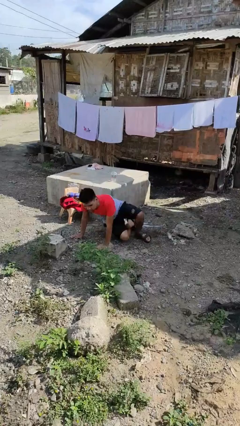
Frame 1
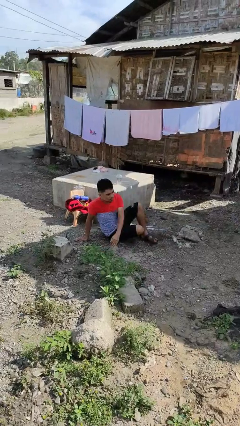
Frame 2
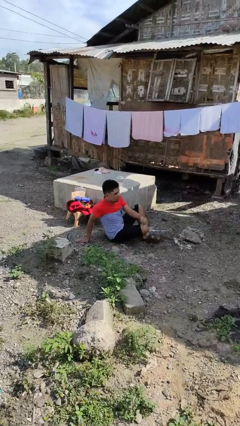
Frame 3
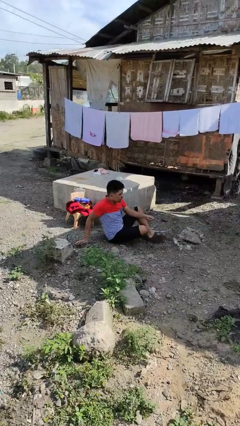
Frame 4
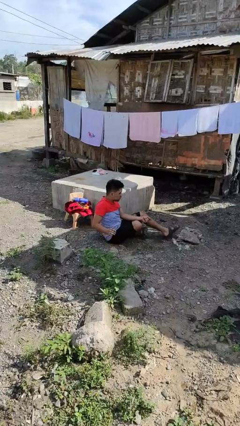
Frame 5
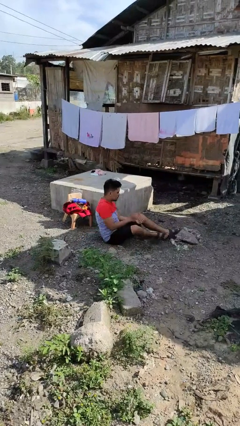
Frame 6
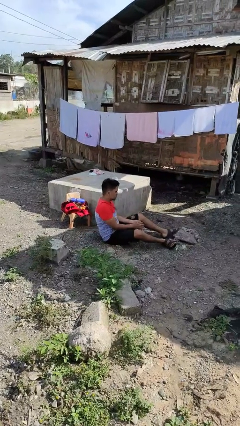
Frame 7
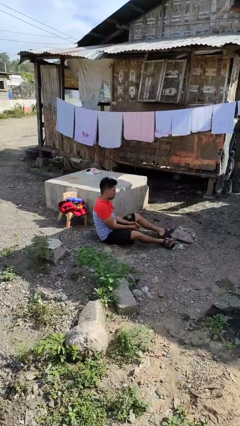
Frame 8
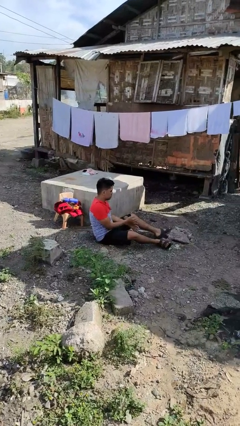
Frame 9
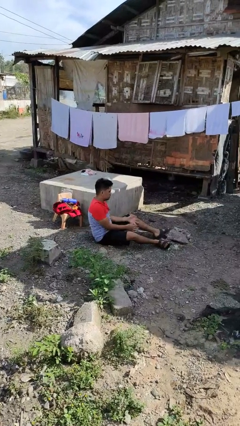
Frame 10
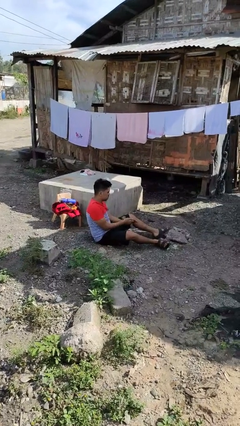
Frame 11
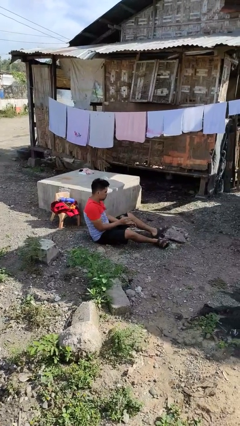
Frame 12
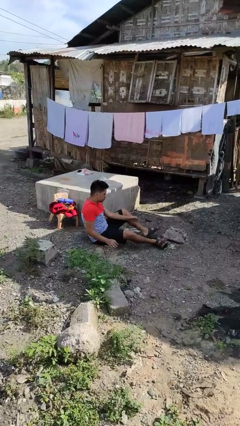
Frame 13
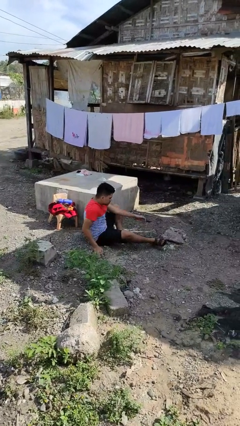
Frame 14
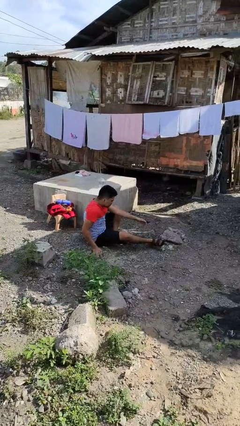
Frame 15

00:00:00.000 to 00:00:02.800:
person lies down on floor

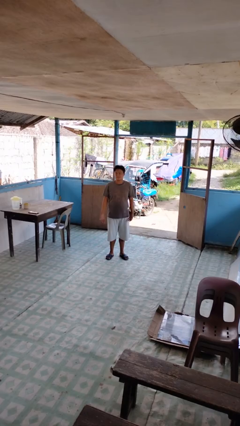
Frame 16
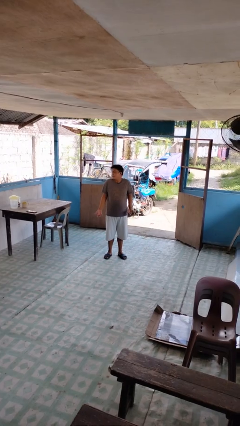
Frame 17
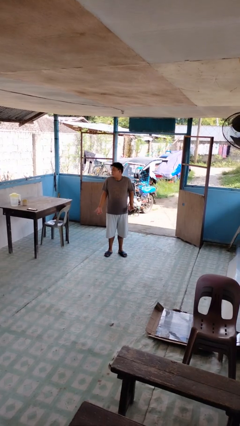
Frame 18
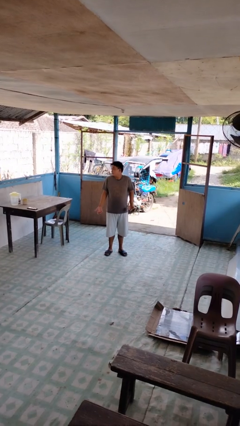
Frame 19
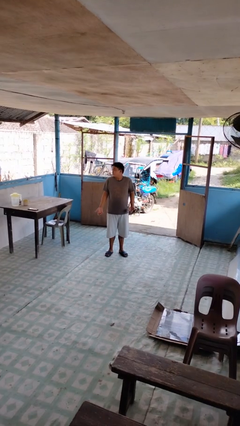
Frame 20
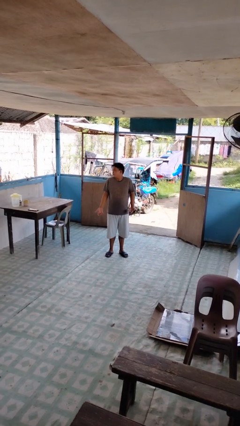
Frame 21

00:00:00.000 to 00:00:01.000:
person shrugs

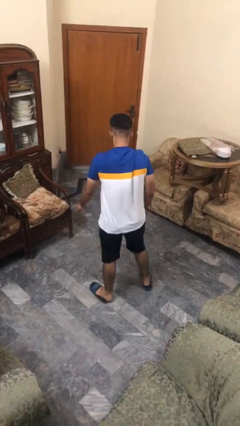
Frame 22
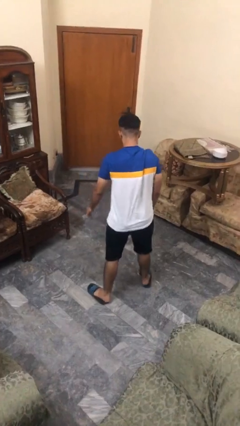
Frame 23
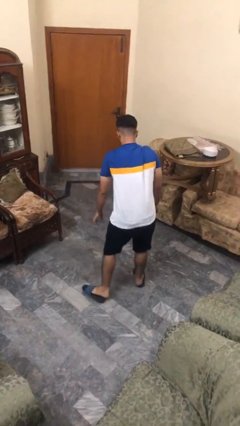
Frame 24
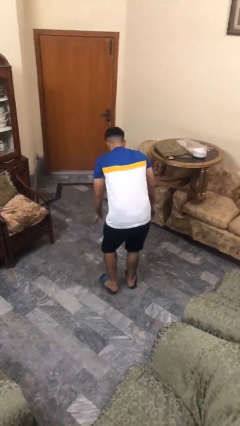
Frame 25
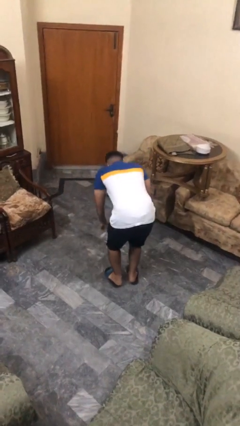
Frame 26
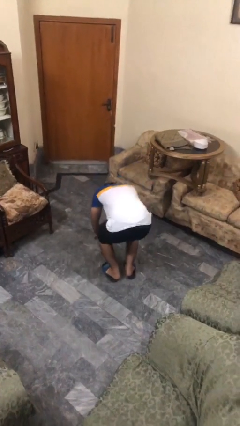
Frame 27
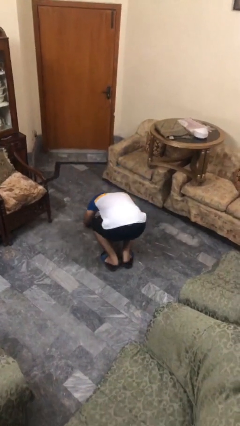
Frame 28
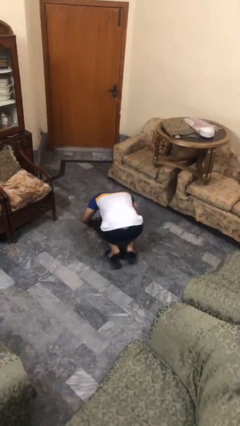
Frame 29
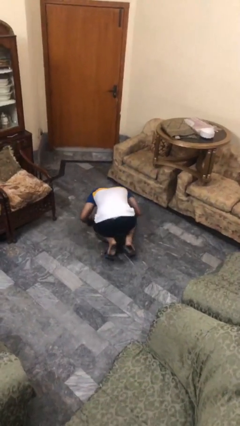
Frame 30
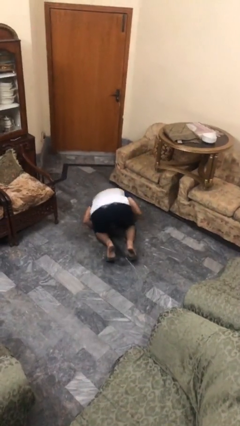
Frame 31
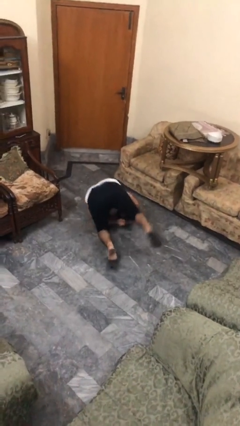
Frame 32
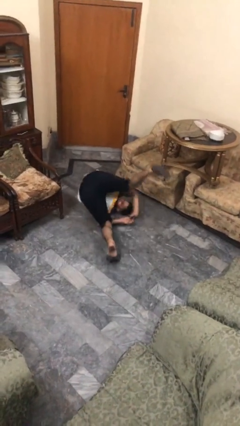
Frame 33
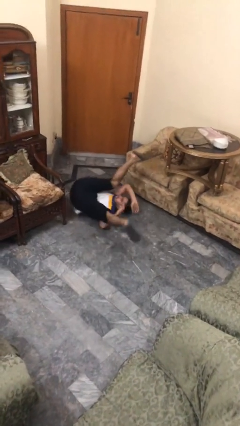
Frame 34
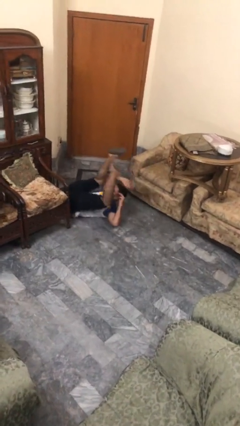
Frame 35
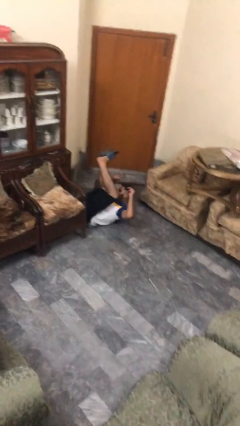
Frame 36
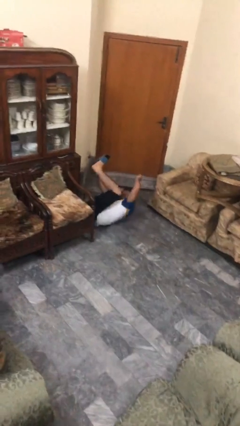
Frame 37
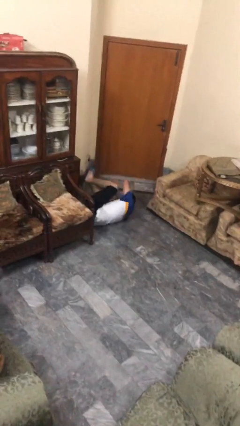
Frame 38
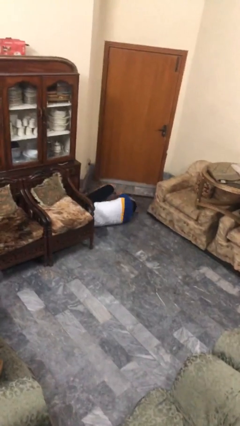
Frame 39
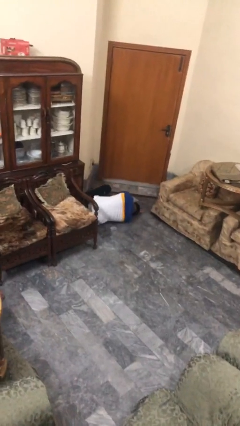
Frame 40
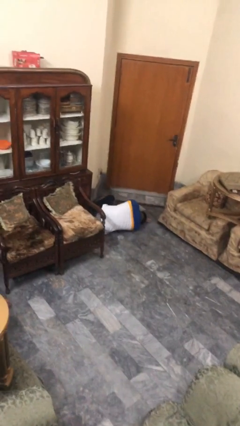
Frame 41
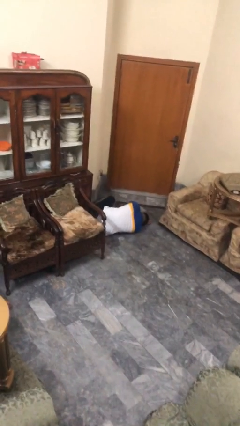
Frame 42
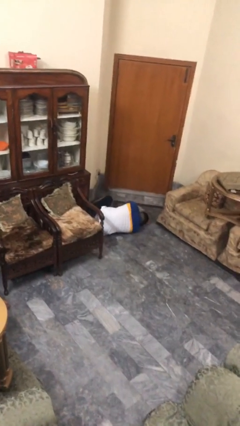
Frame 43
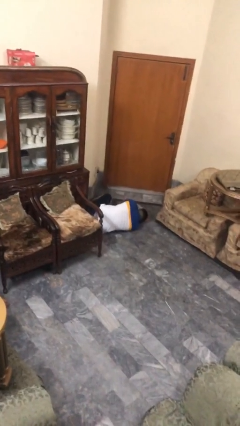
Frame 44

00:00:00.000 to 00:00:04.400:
person somersaults

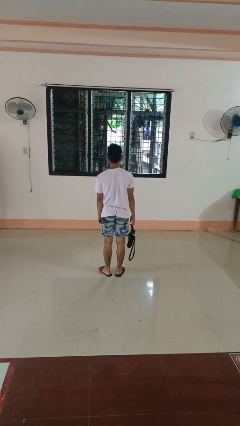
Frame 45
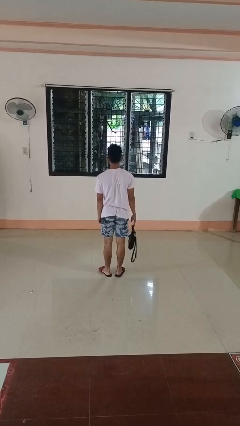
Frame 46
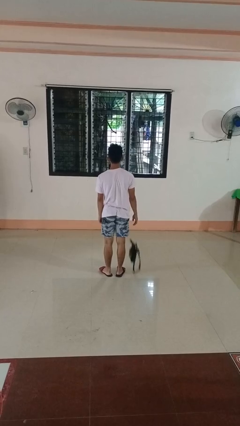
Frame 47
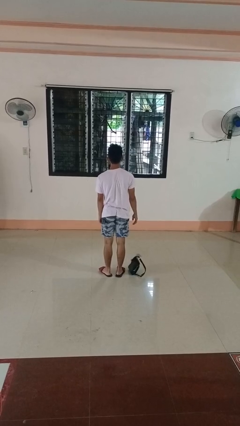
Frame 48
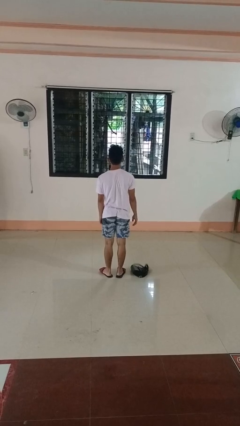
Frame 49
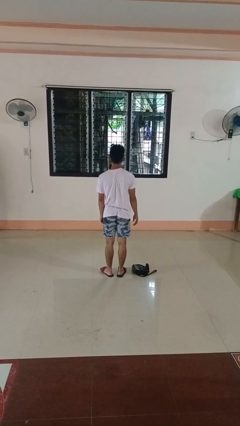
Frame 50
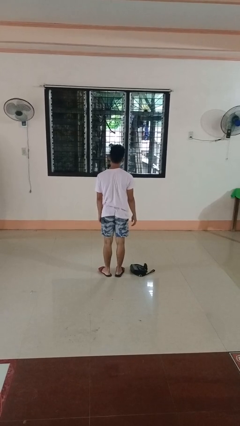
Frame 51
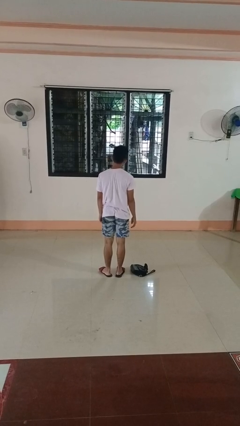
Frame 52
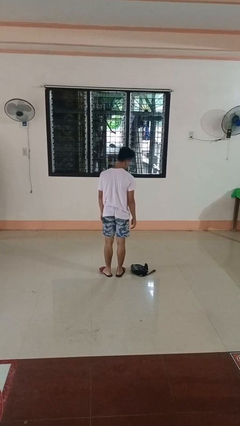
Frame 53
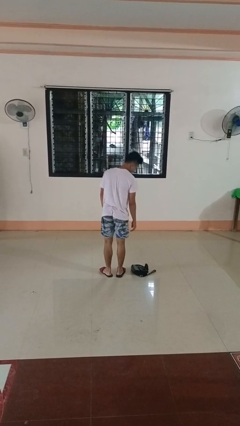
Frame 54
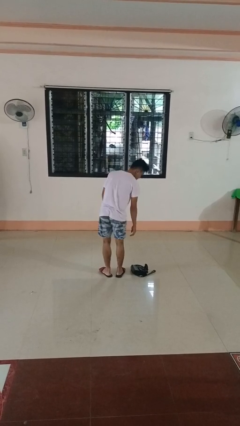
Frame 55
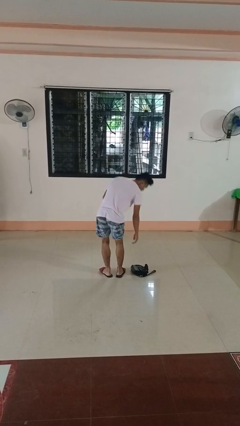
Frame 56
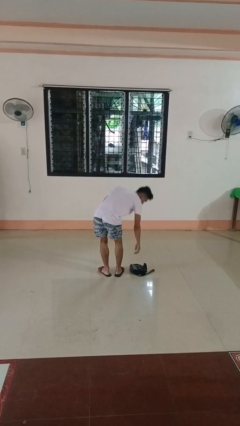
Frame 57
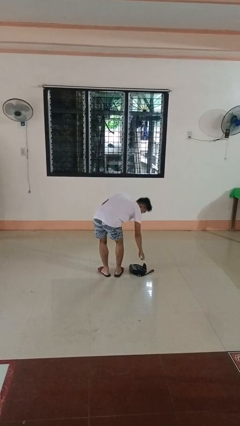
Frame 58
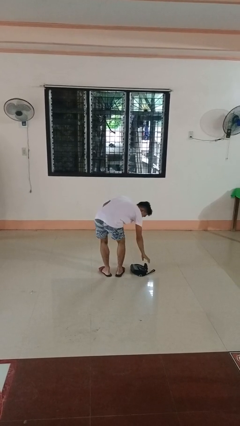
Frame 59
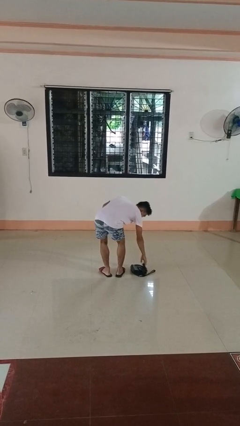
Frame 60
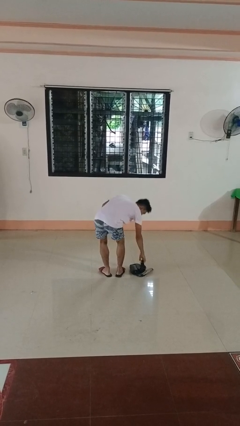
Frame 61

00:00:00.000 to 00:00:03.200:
person drops object

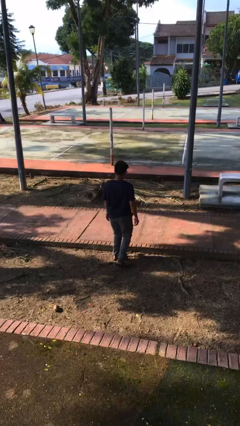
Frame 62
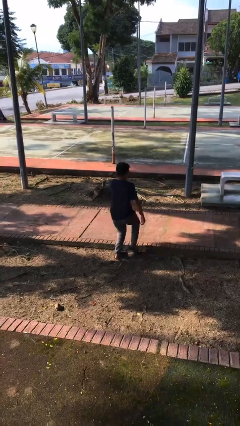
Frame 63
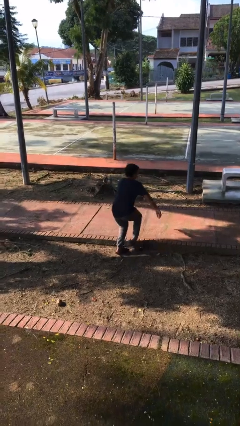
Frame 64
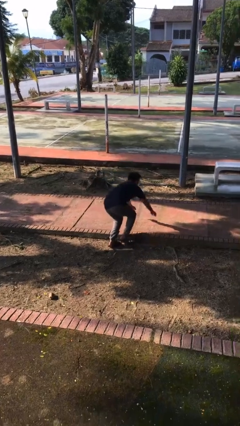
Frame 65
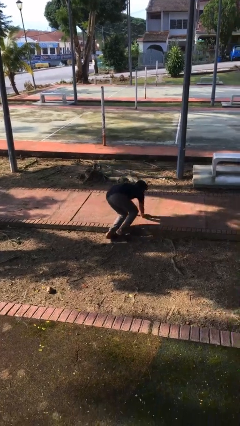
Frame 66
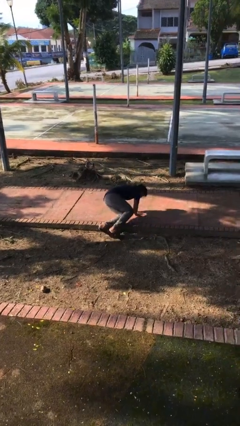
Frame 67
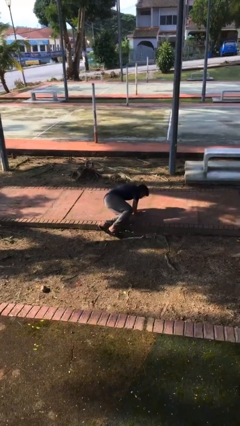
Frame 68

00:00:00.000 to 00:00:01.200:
person trips on object on floor

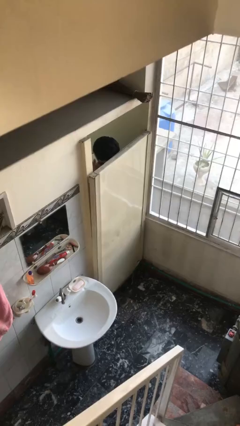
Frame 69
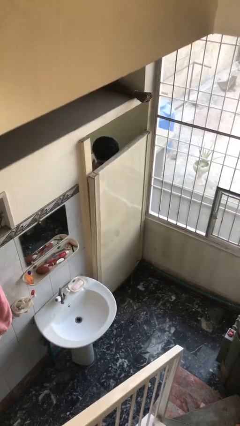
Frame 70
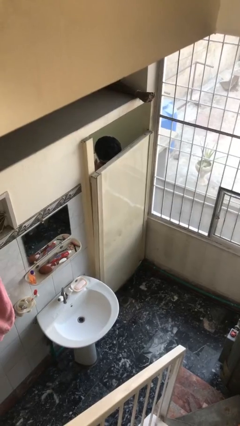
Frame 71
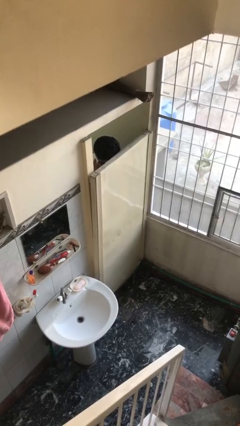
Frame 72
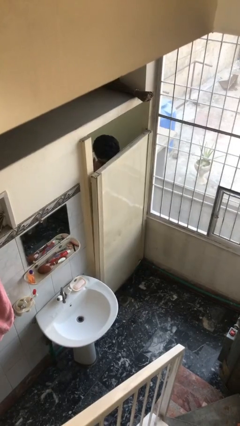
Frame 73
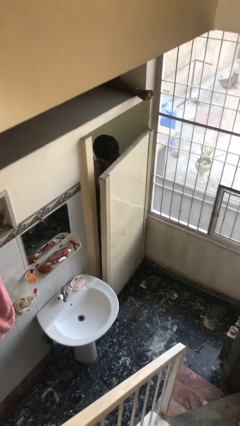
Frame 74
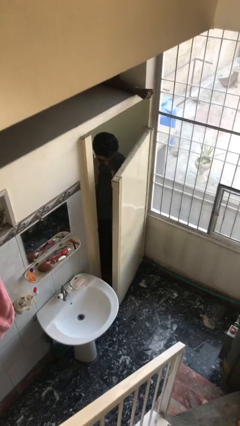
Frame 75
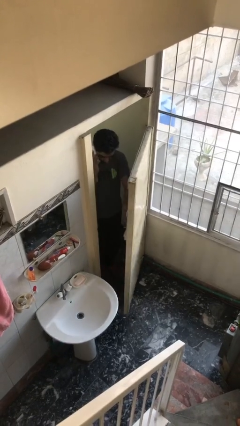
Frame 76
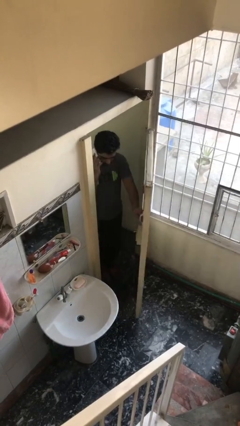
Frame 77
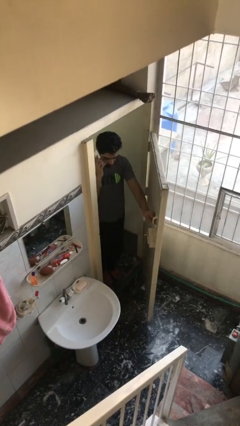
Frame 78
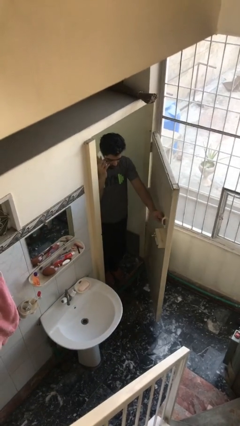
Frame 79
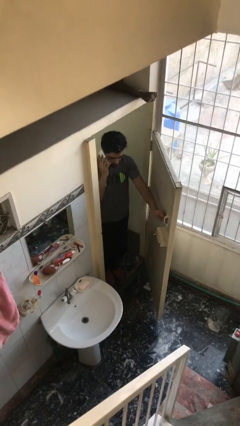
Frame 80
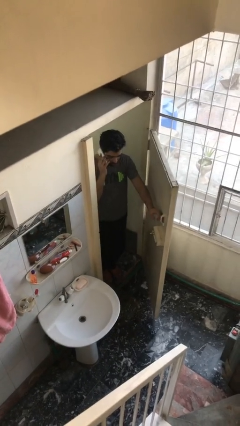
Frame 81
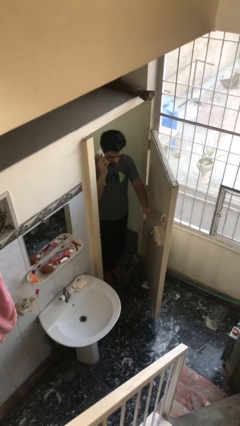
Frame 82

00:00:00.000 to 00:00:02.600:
person opens facility door

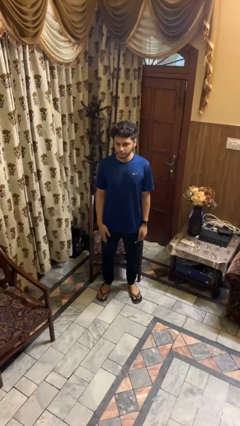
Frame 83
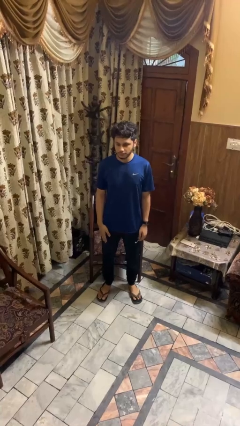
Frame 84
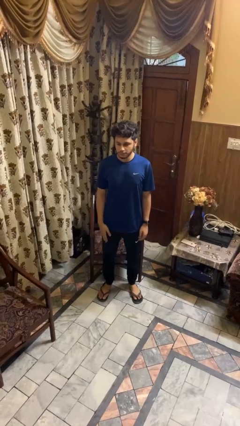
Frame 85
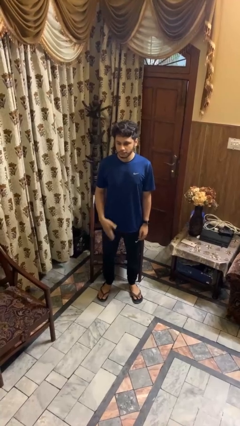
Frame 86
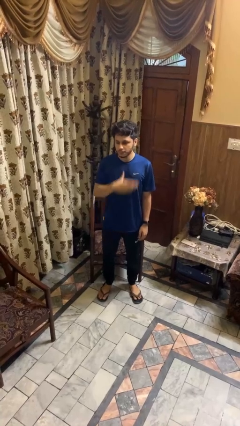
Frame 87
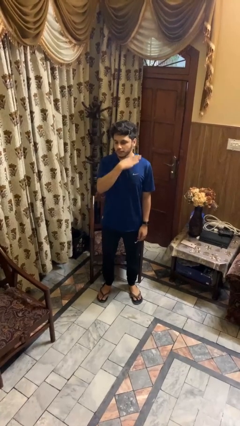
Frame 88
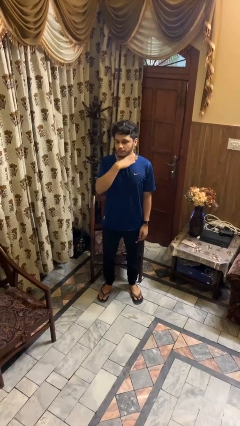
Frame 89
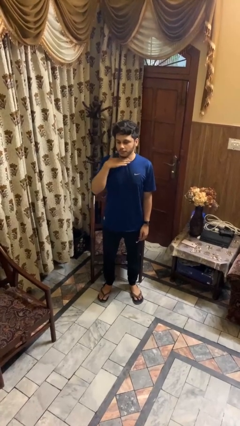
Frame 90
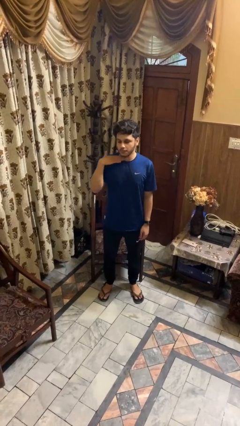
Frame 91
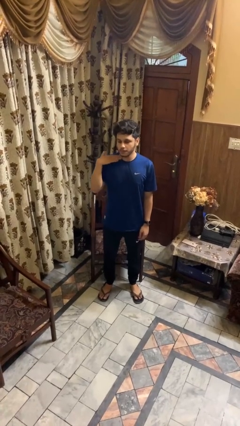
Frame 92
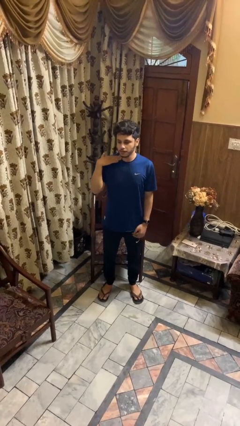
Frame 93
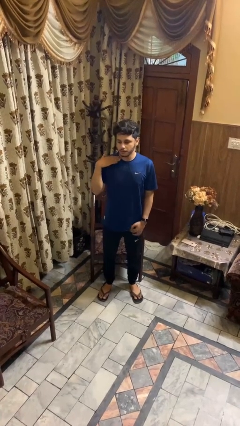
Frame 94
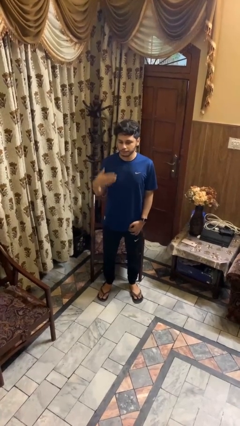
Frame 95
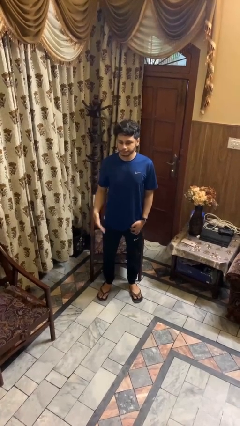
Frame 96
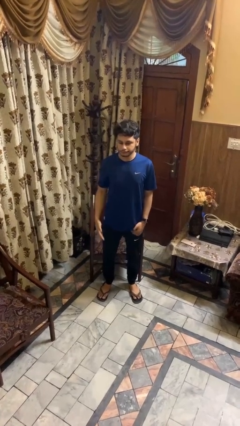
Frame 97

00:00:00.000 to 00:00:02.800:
person gestures cut
